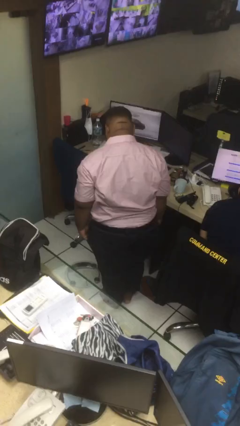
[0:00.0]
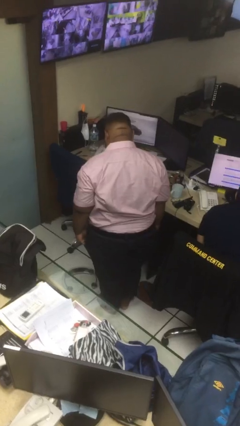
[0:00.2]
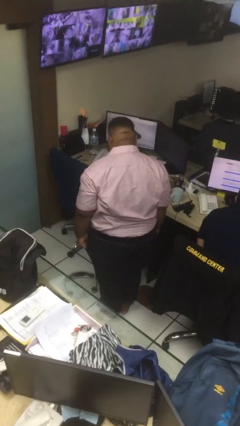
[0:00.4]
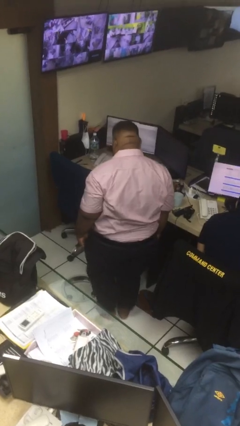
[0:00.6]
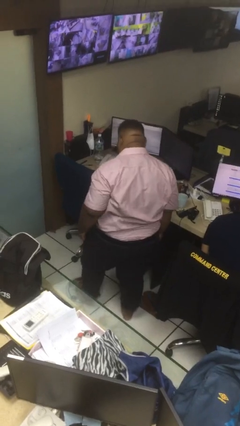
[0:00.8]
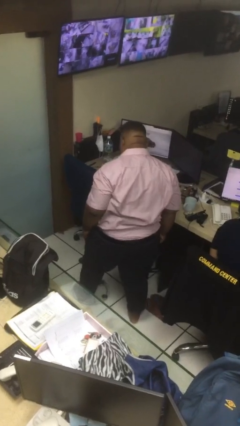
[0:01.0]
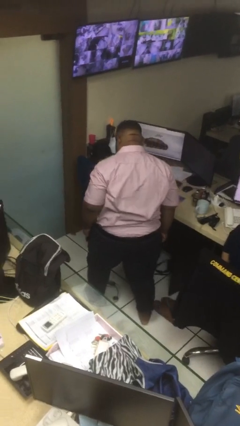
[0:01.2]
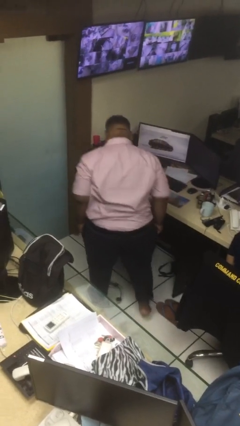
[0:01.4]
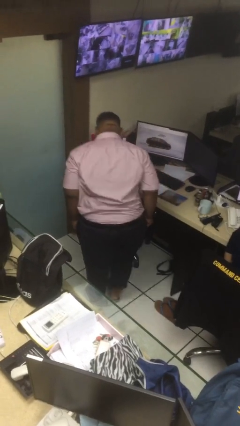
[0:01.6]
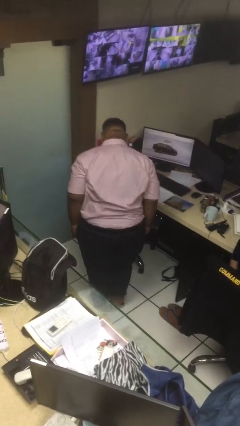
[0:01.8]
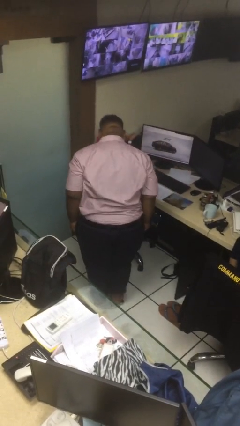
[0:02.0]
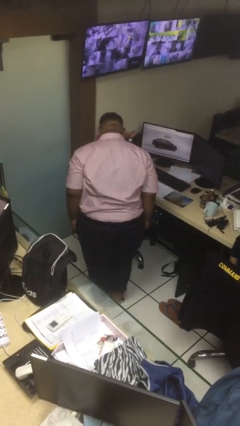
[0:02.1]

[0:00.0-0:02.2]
person uses bodyweight scale

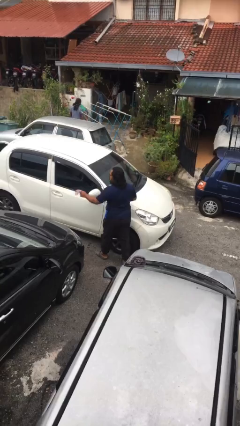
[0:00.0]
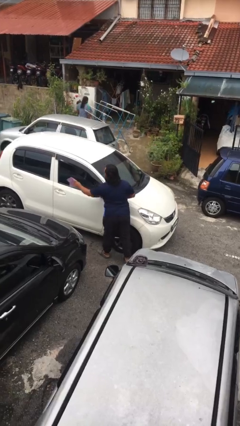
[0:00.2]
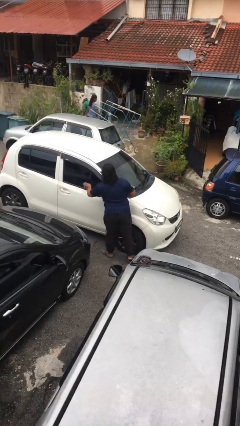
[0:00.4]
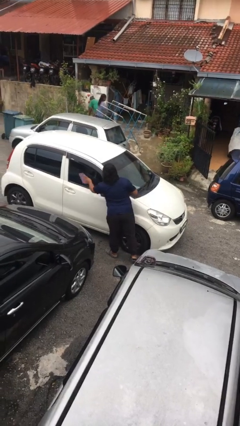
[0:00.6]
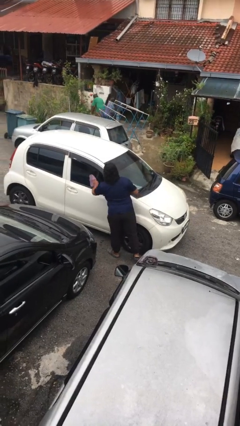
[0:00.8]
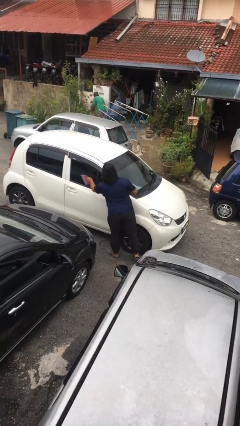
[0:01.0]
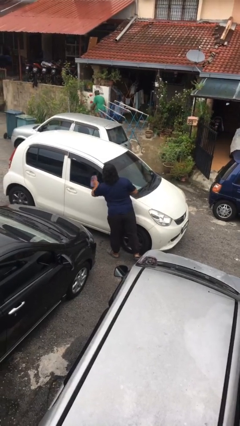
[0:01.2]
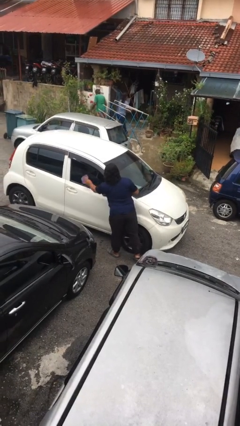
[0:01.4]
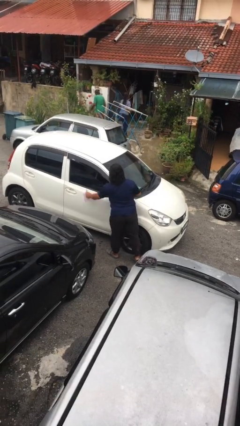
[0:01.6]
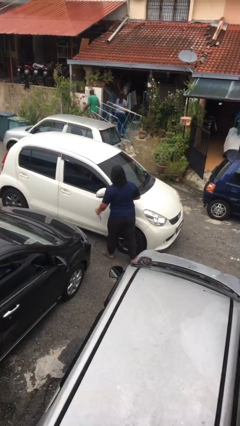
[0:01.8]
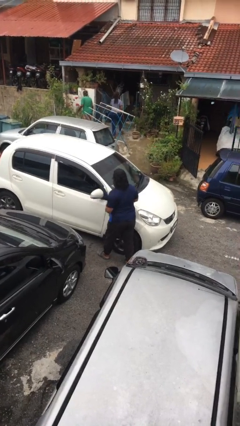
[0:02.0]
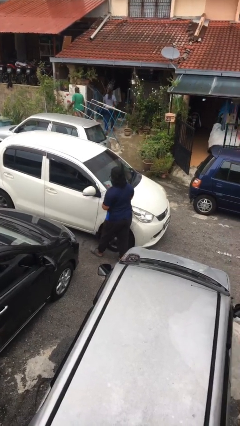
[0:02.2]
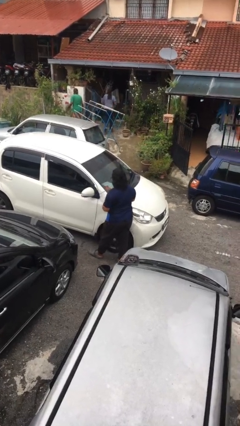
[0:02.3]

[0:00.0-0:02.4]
person polishes car with rag

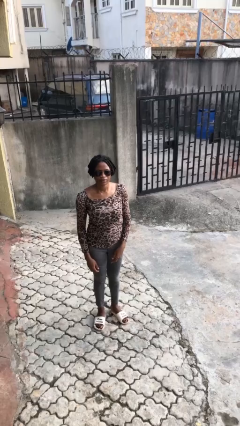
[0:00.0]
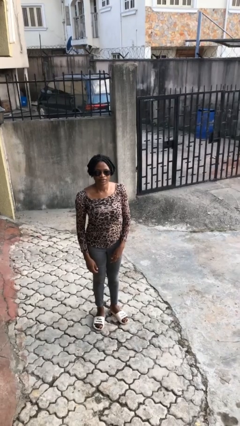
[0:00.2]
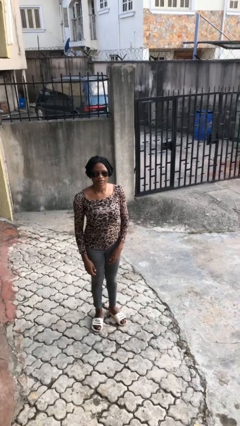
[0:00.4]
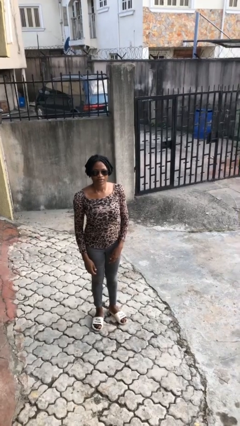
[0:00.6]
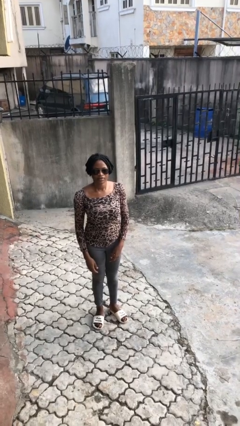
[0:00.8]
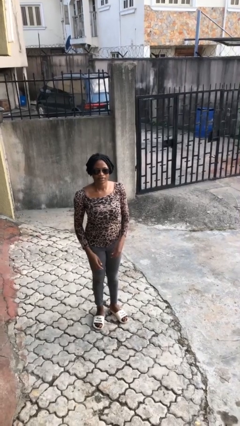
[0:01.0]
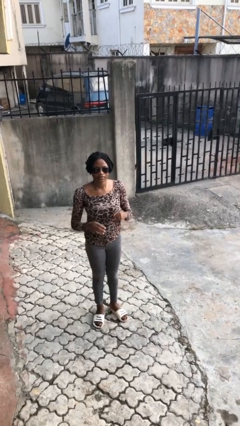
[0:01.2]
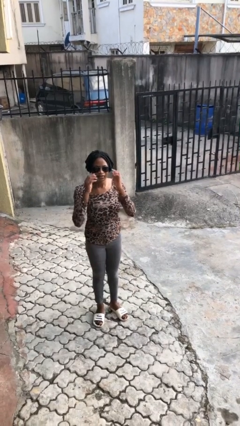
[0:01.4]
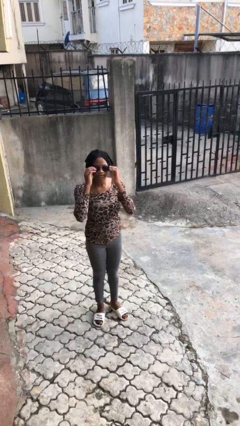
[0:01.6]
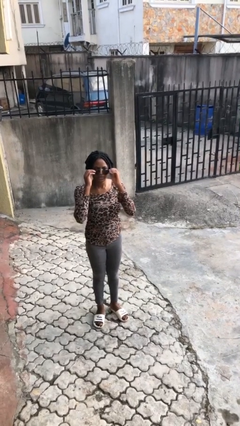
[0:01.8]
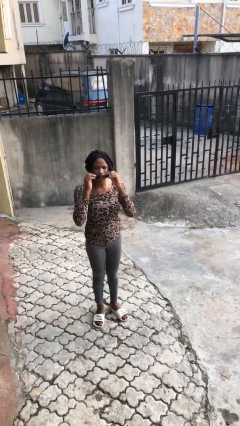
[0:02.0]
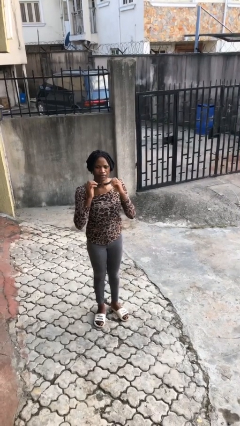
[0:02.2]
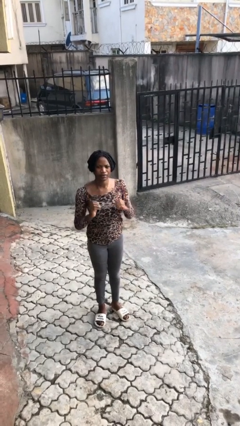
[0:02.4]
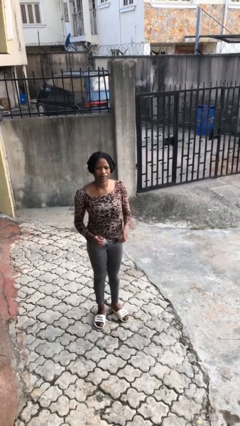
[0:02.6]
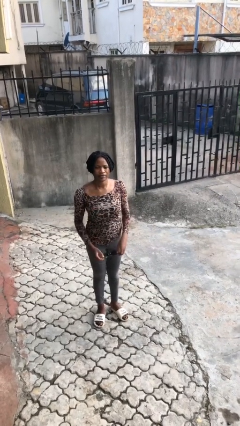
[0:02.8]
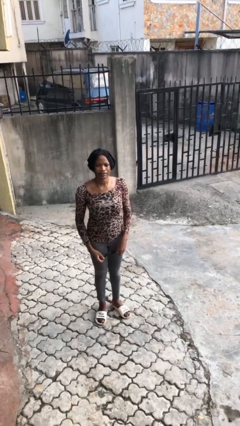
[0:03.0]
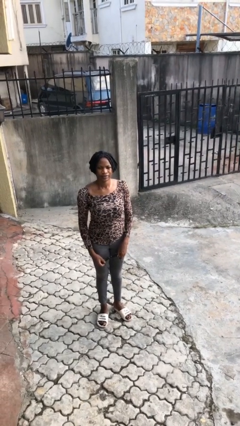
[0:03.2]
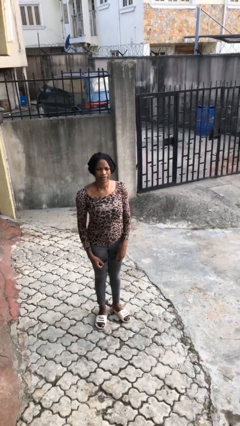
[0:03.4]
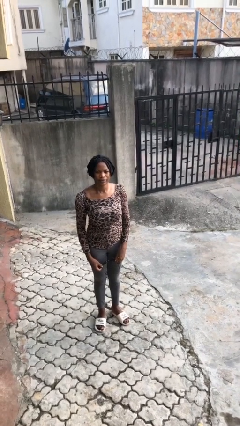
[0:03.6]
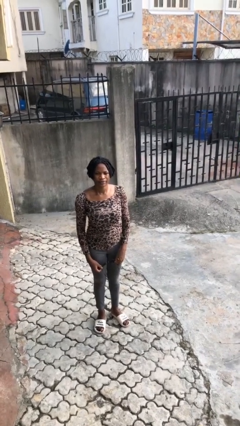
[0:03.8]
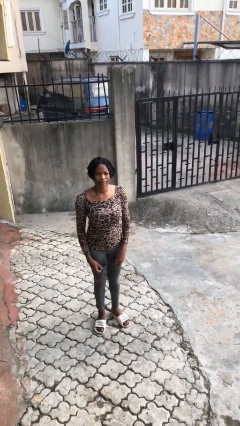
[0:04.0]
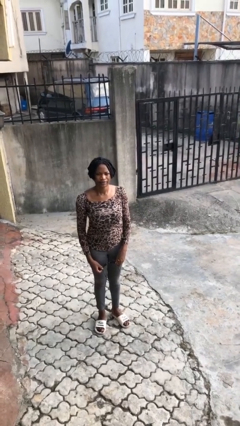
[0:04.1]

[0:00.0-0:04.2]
person takes off sunglasses

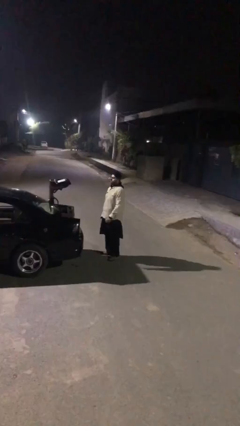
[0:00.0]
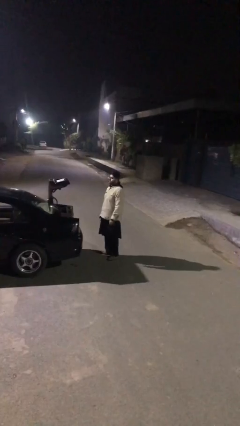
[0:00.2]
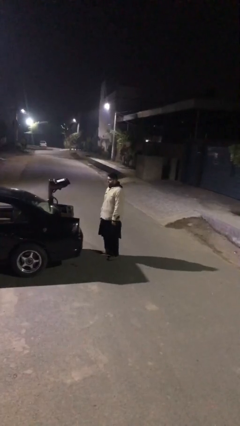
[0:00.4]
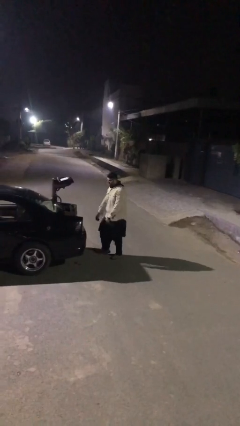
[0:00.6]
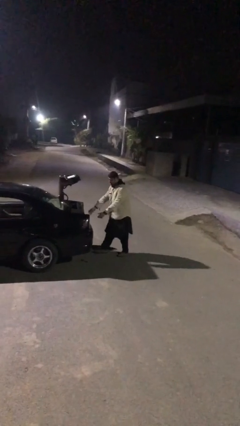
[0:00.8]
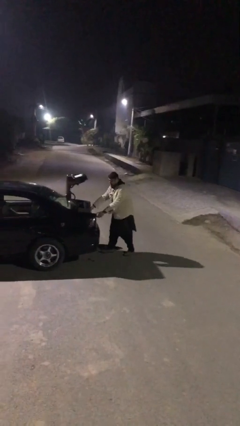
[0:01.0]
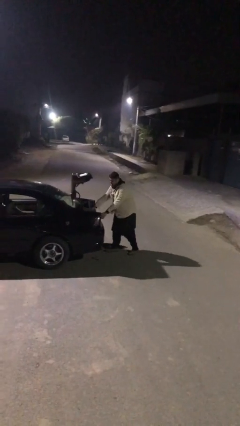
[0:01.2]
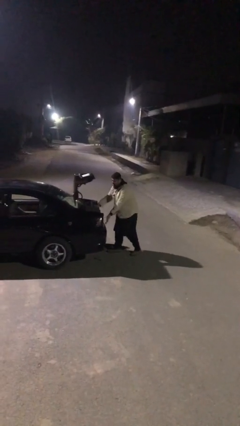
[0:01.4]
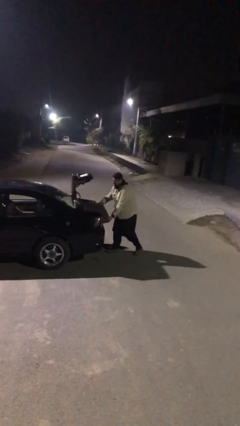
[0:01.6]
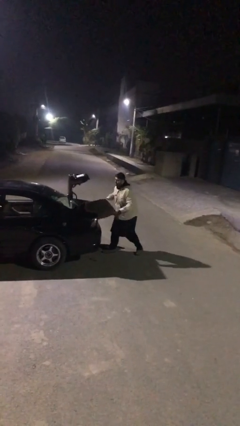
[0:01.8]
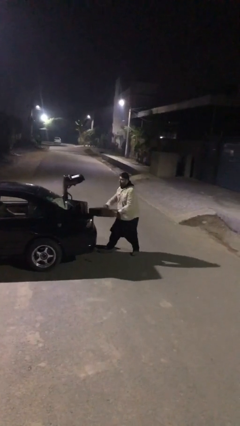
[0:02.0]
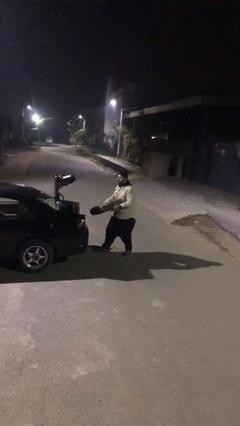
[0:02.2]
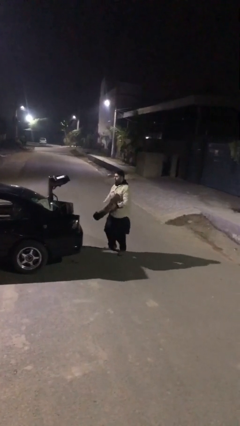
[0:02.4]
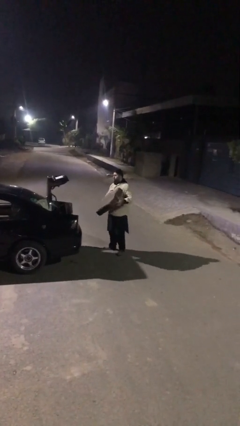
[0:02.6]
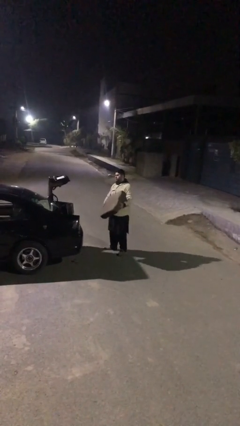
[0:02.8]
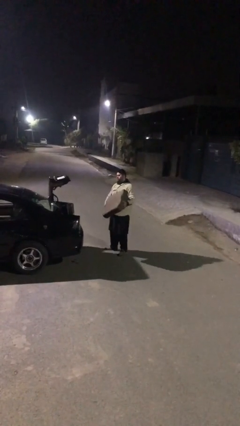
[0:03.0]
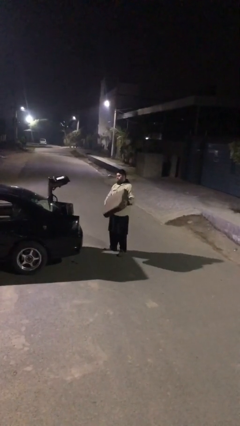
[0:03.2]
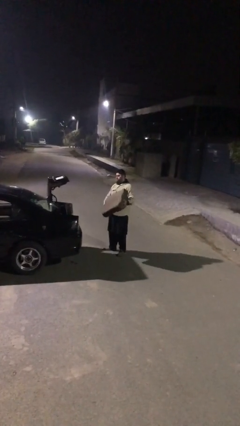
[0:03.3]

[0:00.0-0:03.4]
person unloads car

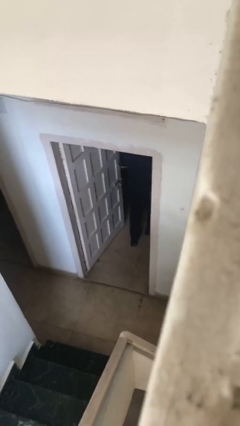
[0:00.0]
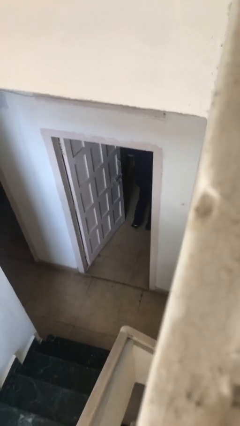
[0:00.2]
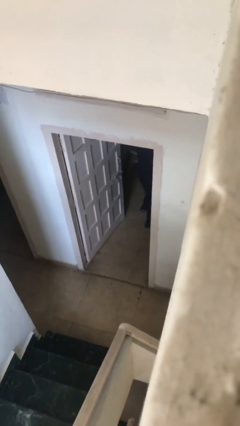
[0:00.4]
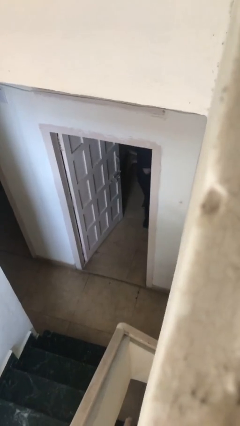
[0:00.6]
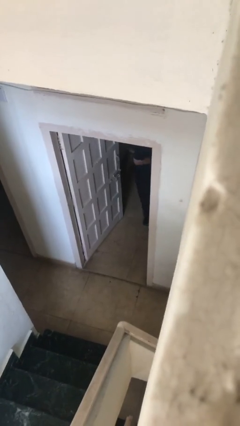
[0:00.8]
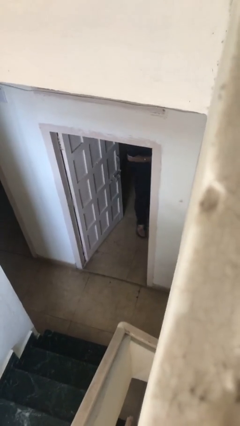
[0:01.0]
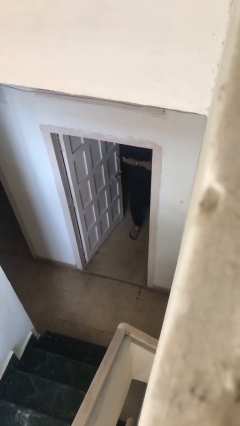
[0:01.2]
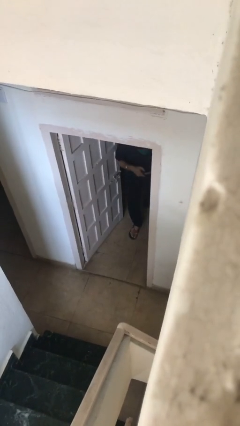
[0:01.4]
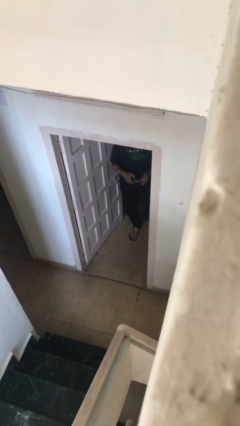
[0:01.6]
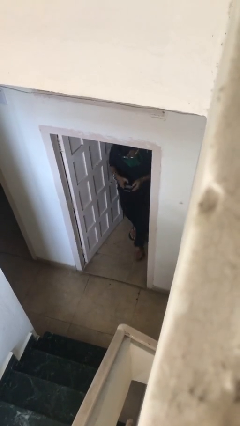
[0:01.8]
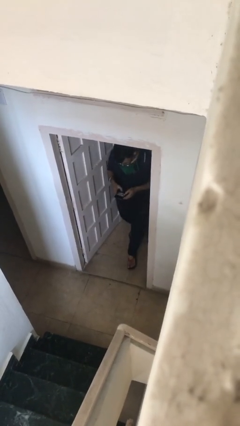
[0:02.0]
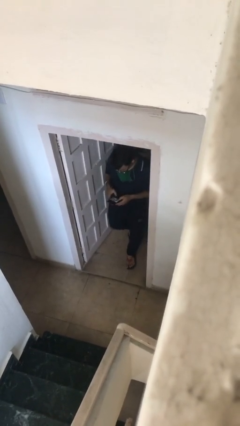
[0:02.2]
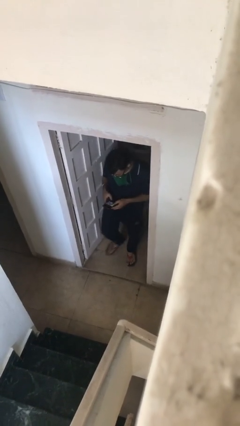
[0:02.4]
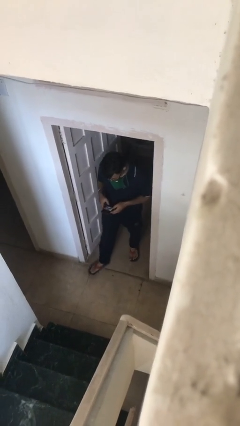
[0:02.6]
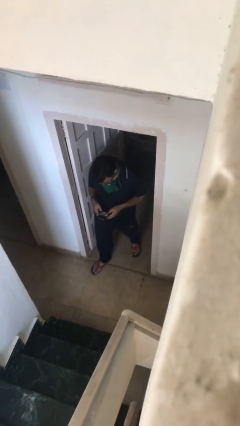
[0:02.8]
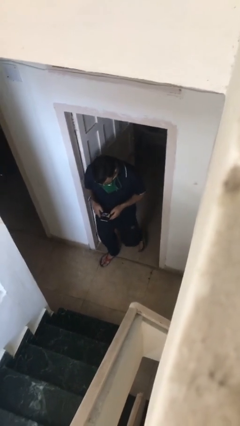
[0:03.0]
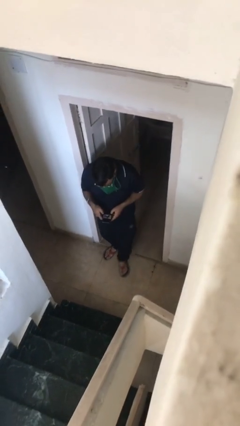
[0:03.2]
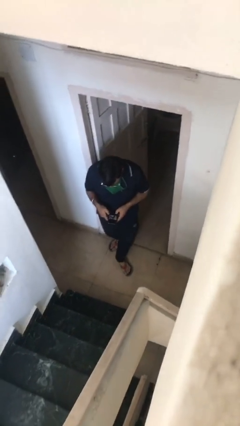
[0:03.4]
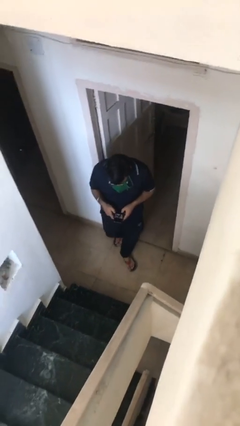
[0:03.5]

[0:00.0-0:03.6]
person enters scene through structure

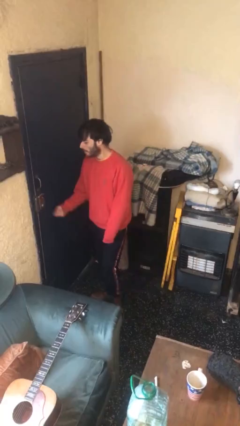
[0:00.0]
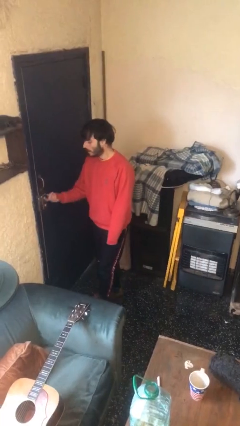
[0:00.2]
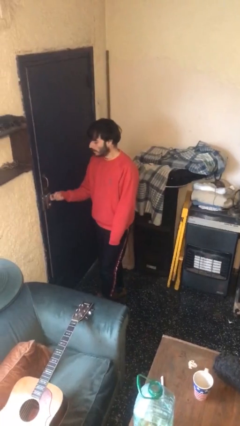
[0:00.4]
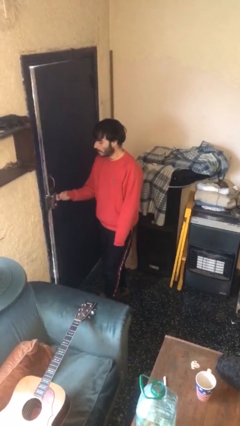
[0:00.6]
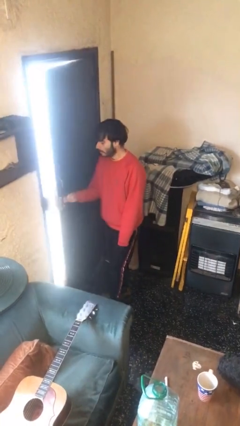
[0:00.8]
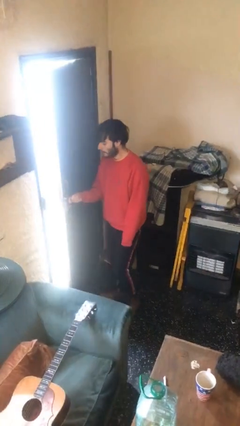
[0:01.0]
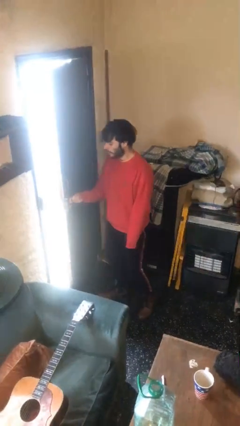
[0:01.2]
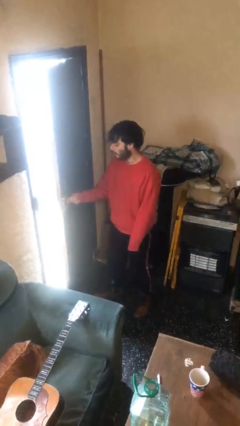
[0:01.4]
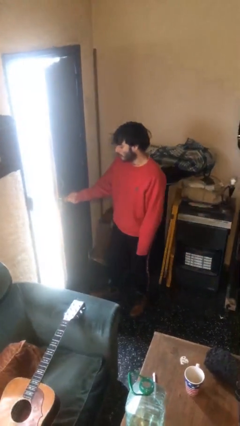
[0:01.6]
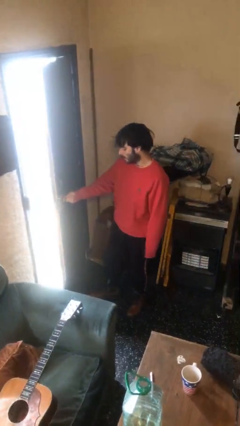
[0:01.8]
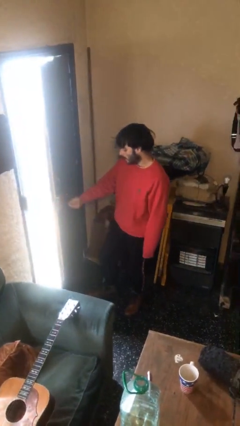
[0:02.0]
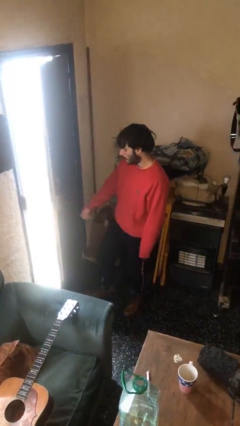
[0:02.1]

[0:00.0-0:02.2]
person opens facility door
